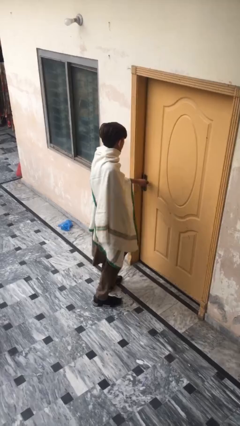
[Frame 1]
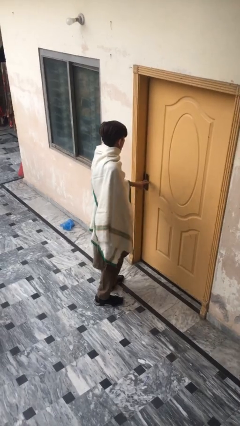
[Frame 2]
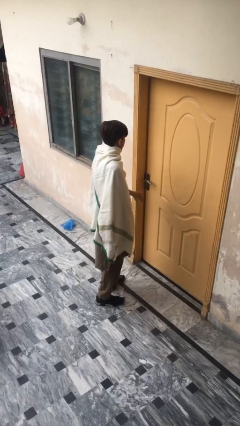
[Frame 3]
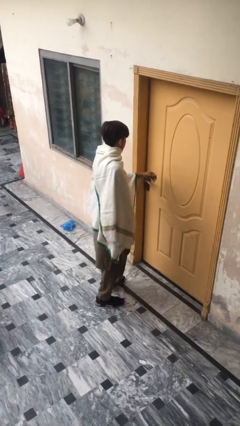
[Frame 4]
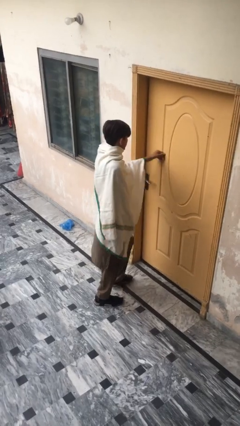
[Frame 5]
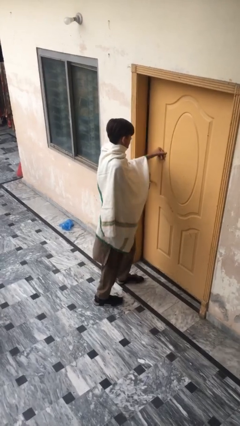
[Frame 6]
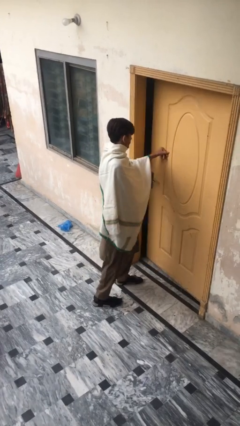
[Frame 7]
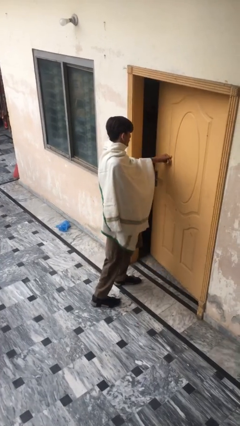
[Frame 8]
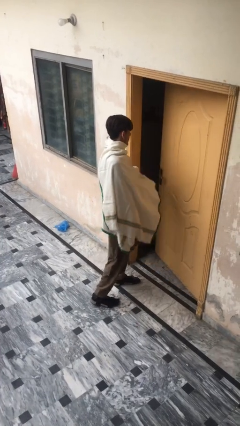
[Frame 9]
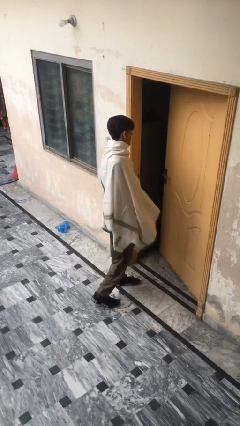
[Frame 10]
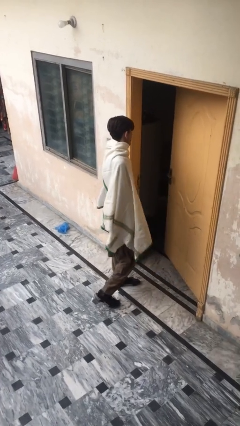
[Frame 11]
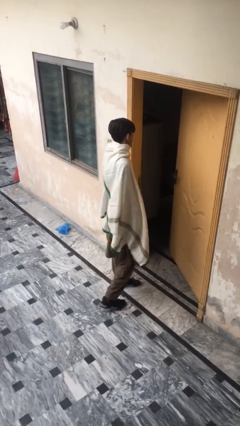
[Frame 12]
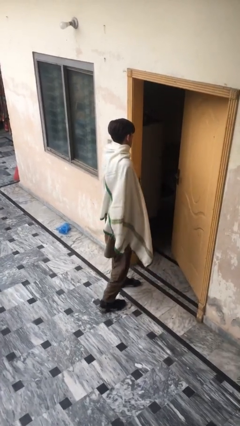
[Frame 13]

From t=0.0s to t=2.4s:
person opens facility door

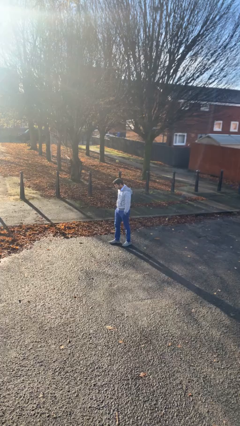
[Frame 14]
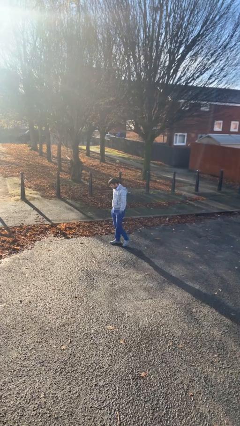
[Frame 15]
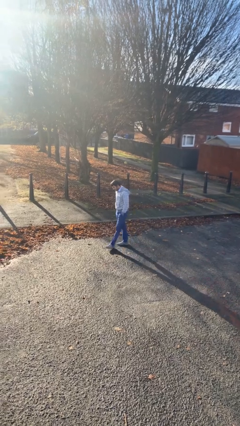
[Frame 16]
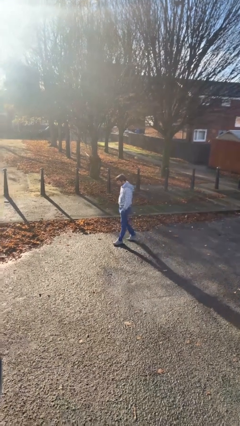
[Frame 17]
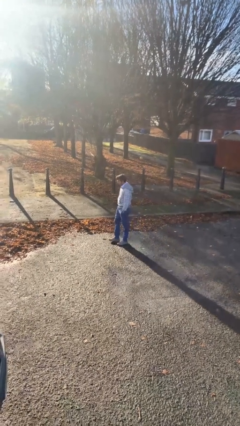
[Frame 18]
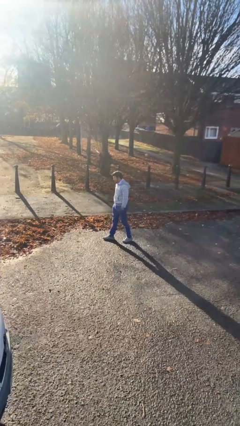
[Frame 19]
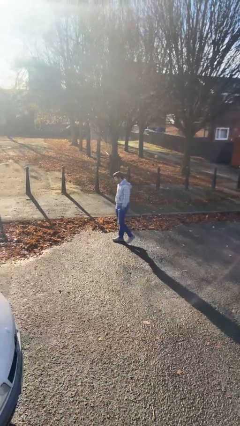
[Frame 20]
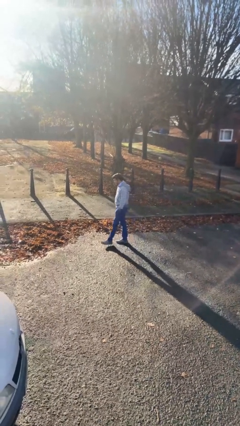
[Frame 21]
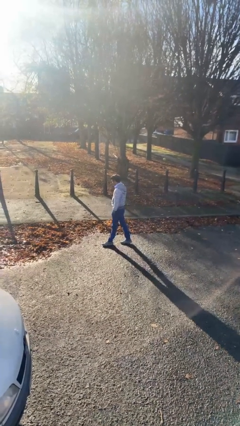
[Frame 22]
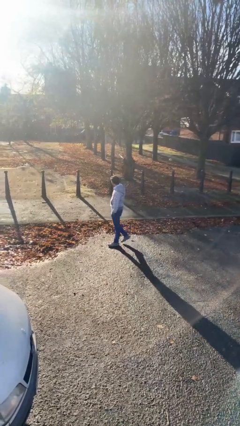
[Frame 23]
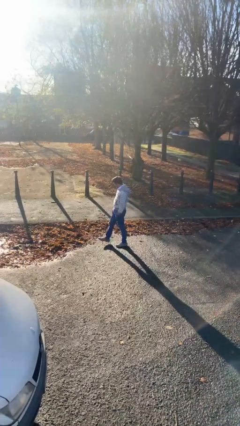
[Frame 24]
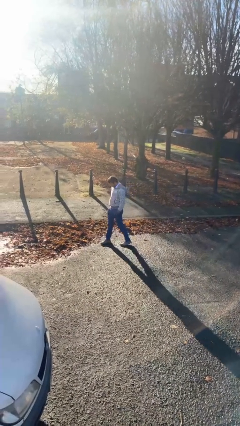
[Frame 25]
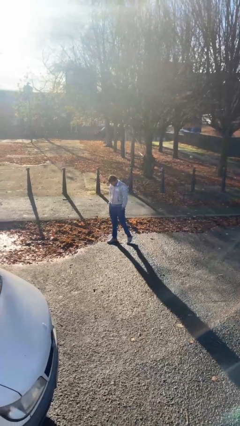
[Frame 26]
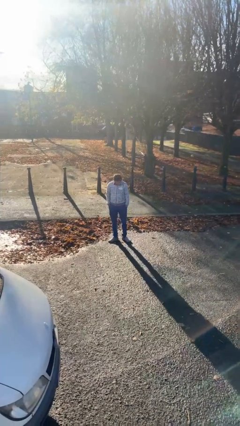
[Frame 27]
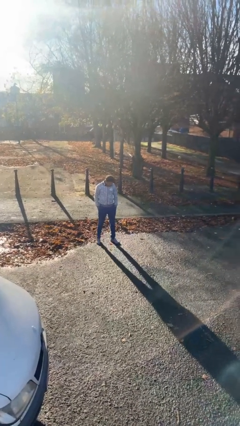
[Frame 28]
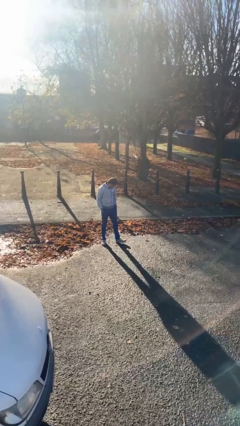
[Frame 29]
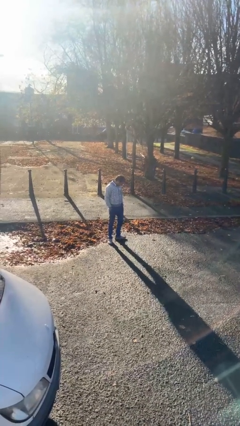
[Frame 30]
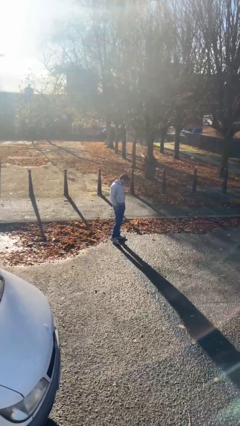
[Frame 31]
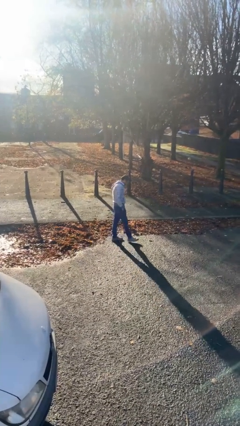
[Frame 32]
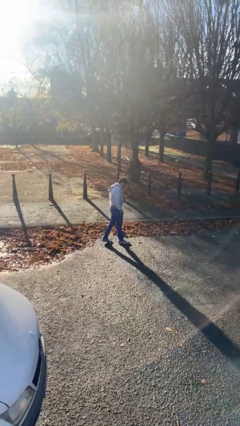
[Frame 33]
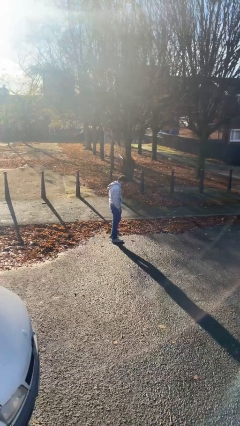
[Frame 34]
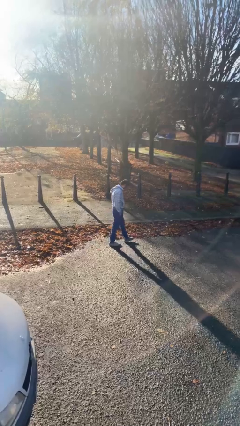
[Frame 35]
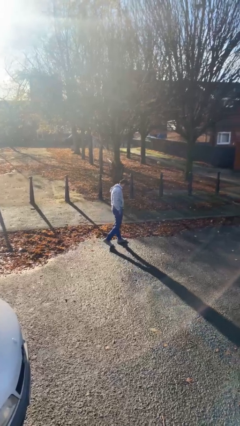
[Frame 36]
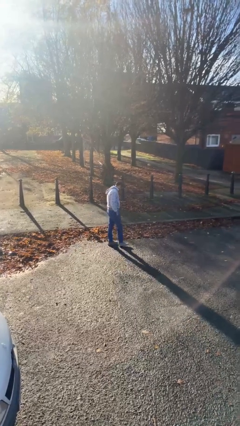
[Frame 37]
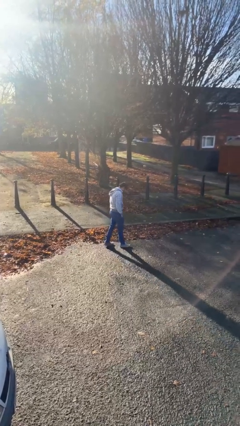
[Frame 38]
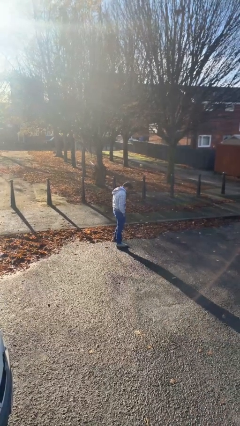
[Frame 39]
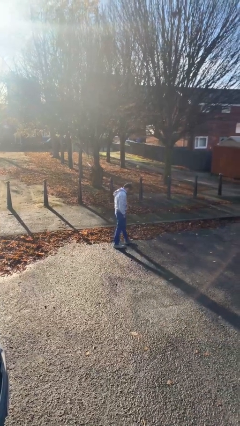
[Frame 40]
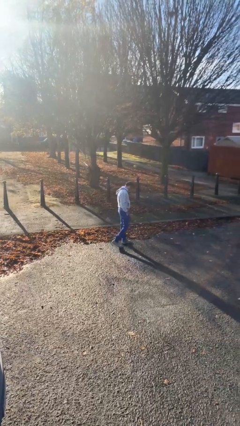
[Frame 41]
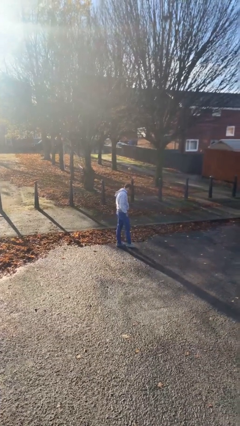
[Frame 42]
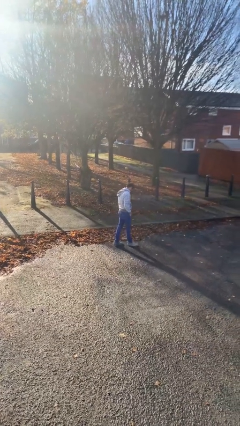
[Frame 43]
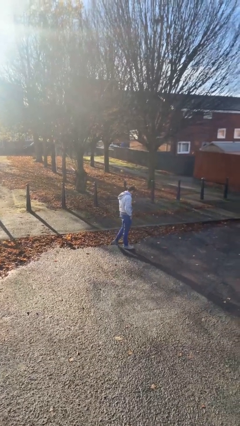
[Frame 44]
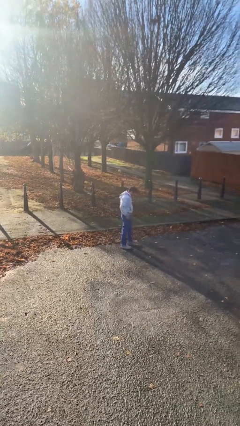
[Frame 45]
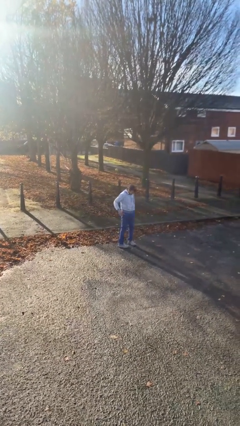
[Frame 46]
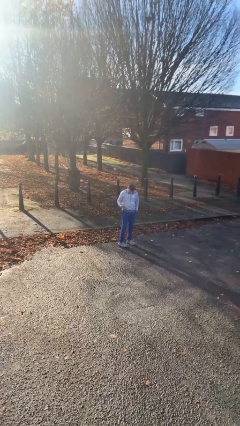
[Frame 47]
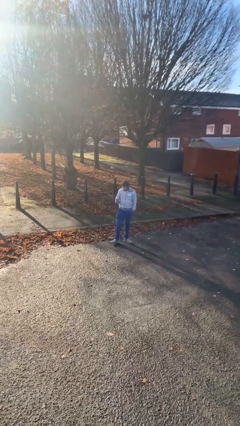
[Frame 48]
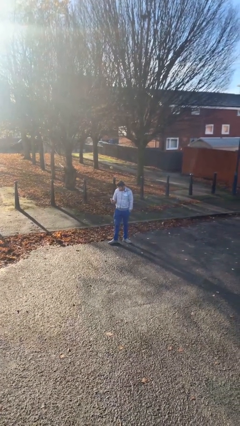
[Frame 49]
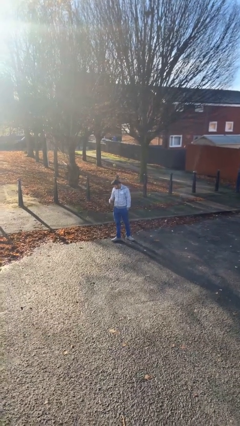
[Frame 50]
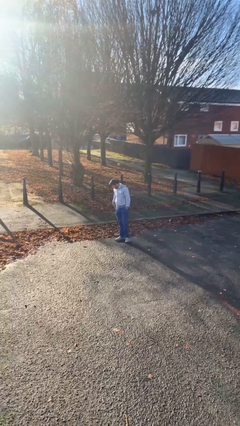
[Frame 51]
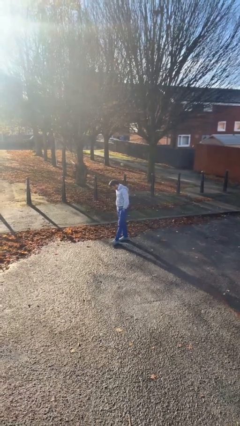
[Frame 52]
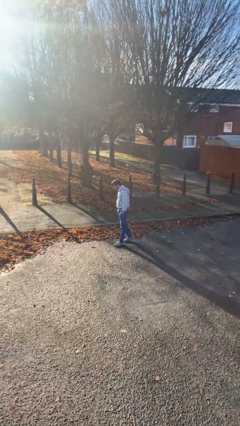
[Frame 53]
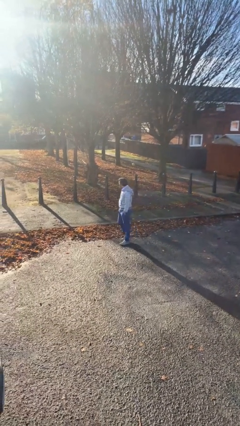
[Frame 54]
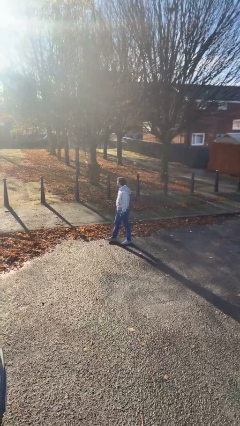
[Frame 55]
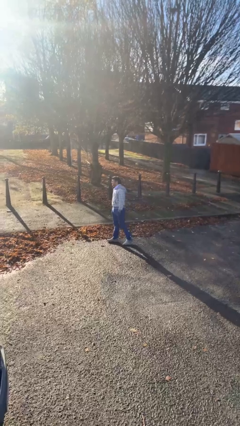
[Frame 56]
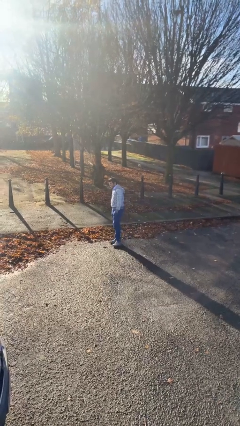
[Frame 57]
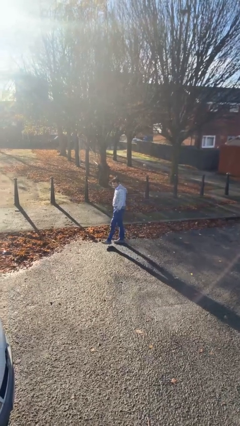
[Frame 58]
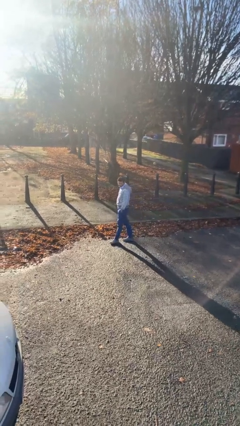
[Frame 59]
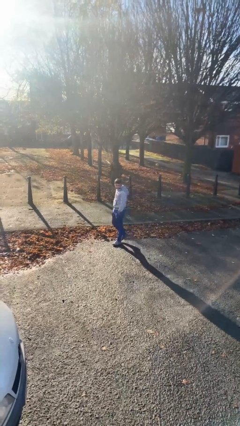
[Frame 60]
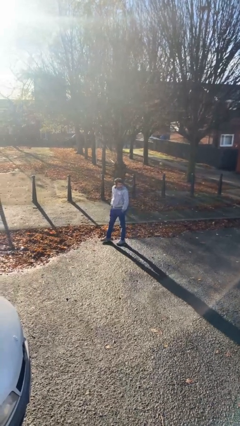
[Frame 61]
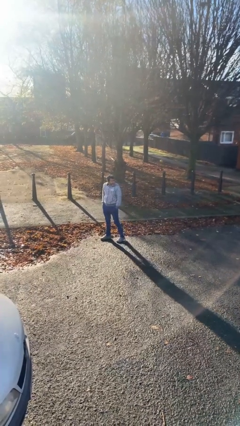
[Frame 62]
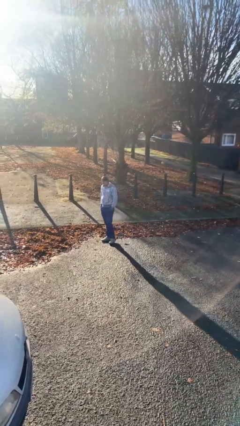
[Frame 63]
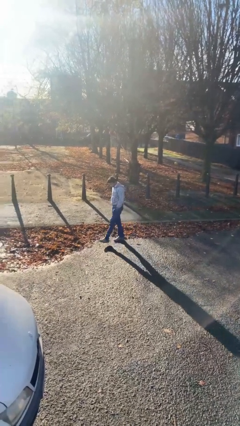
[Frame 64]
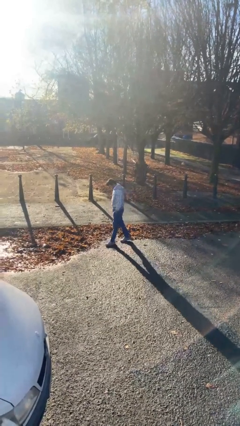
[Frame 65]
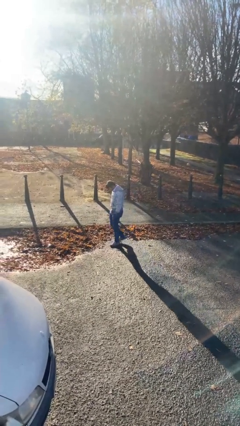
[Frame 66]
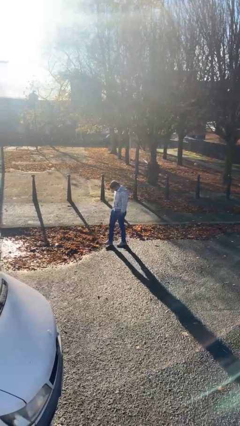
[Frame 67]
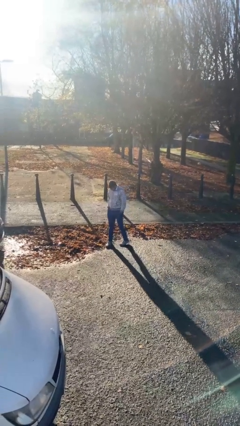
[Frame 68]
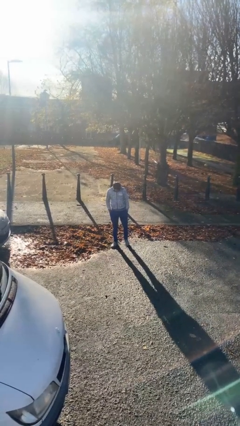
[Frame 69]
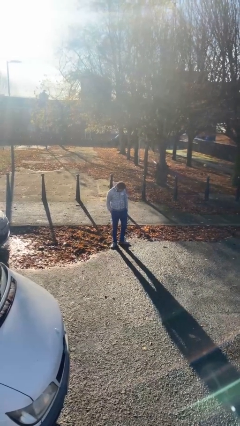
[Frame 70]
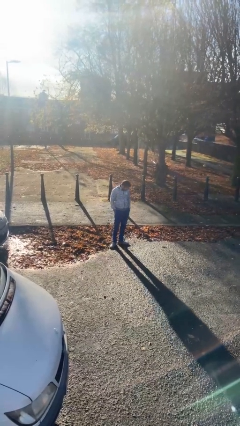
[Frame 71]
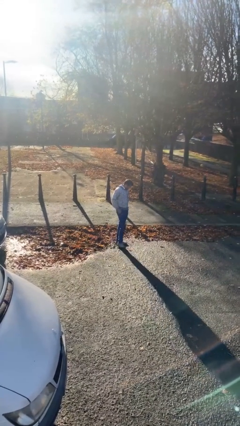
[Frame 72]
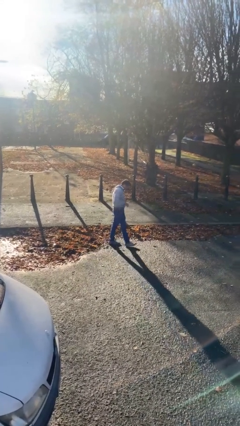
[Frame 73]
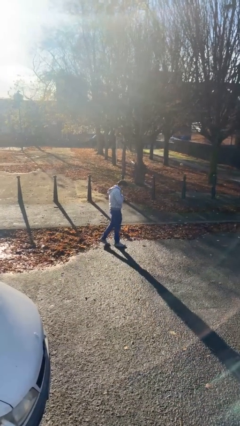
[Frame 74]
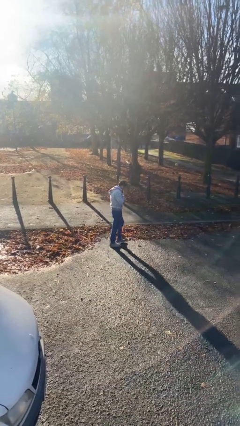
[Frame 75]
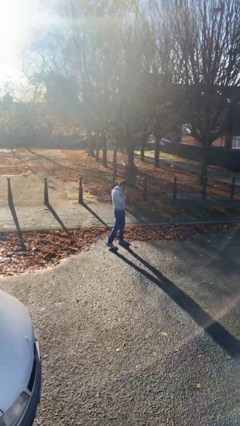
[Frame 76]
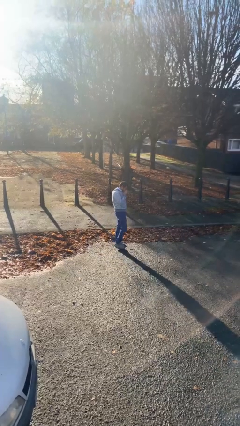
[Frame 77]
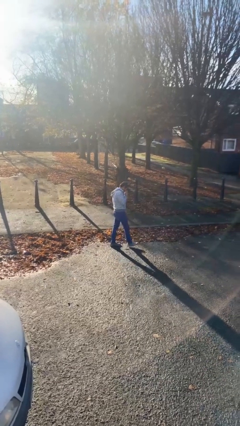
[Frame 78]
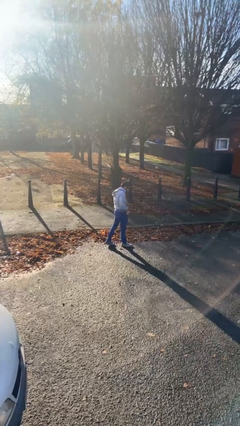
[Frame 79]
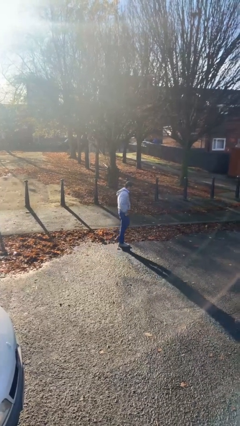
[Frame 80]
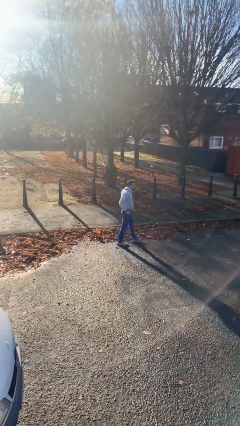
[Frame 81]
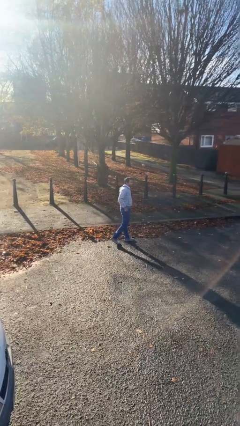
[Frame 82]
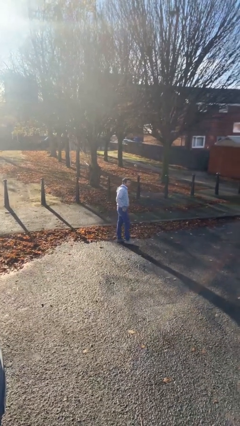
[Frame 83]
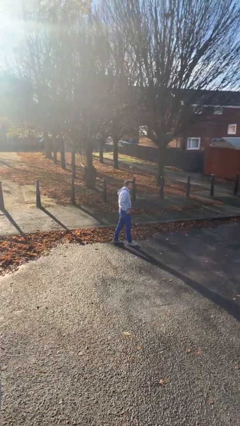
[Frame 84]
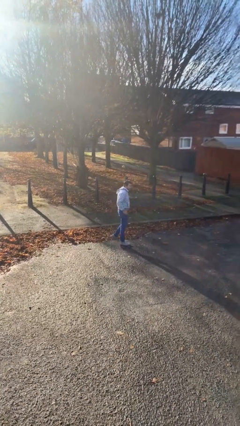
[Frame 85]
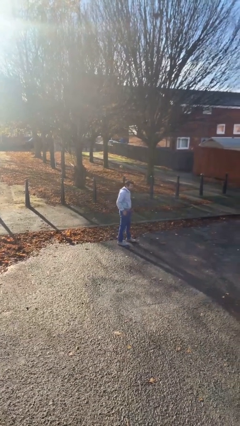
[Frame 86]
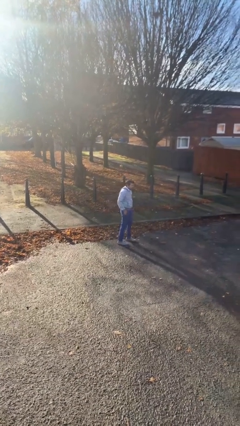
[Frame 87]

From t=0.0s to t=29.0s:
person walks

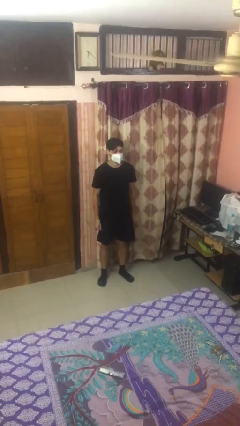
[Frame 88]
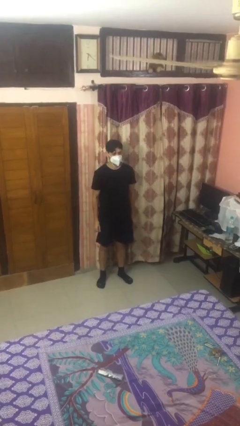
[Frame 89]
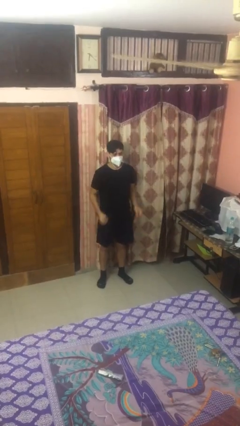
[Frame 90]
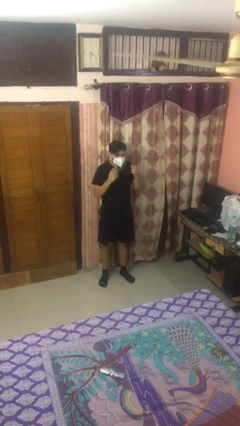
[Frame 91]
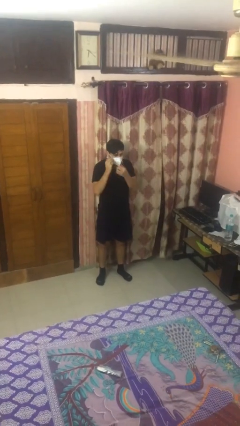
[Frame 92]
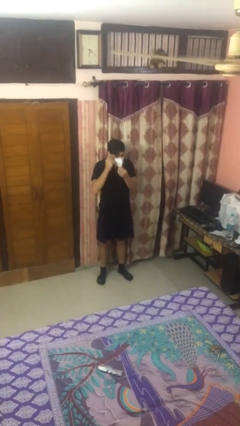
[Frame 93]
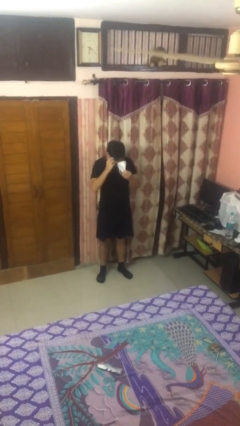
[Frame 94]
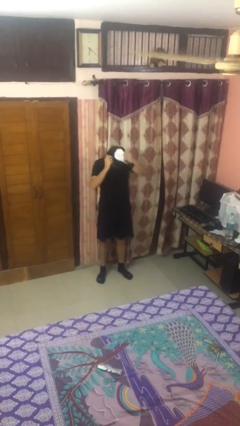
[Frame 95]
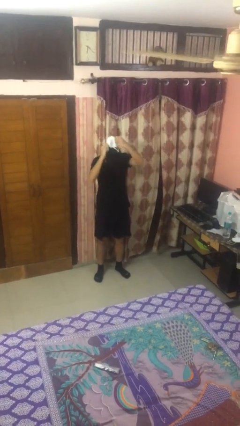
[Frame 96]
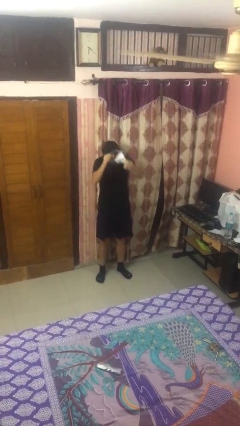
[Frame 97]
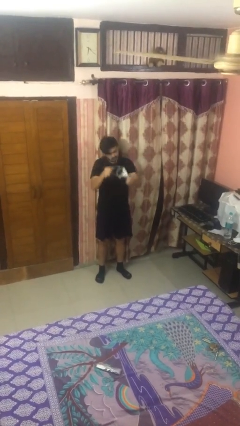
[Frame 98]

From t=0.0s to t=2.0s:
person takes off facemask
